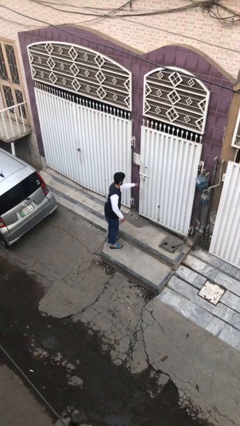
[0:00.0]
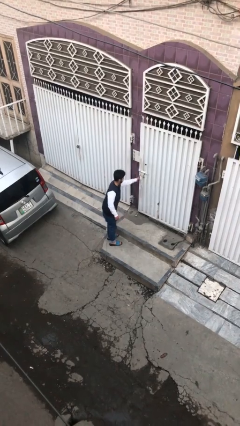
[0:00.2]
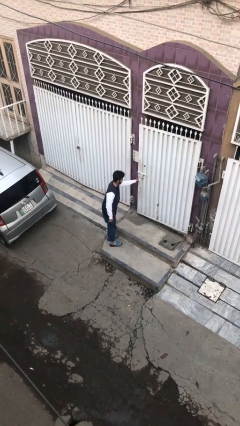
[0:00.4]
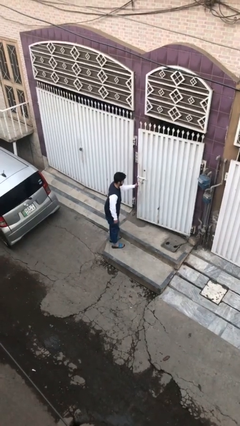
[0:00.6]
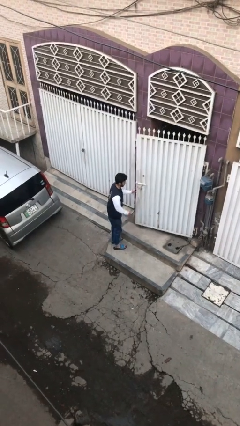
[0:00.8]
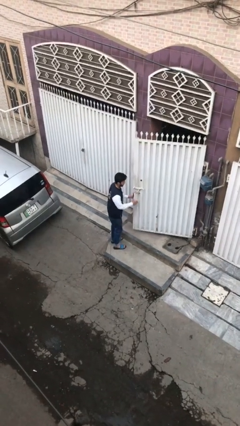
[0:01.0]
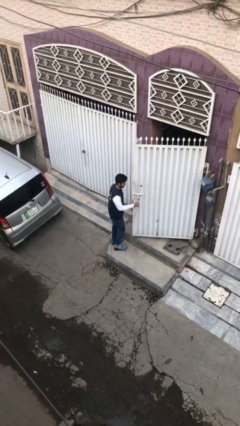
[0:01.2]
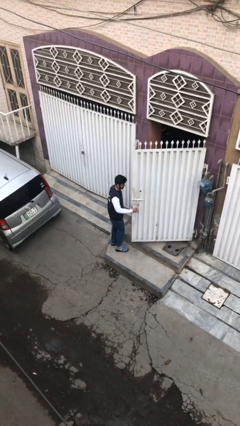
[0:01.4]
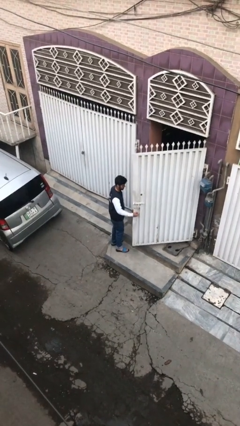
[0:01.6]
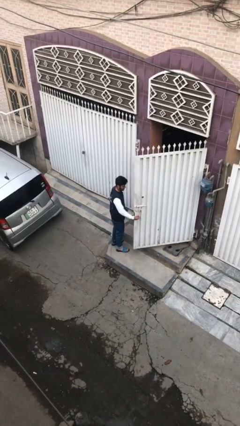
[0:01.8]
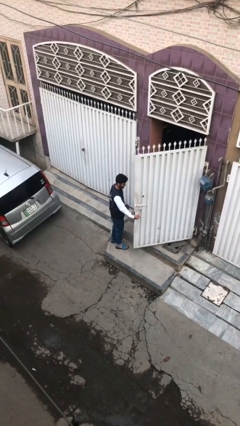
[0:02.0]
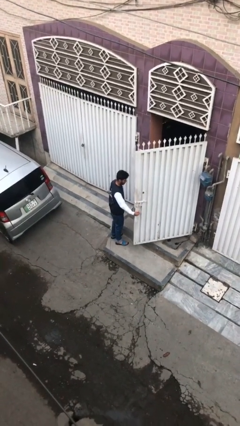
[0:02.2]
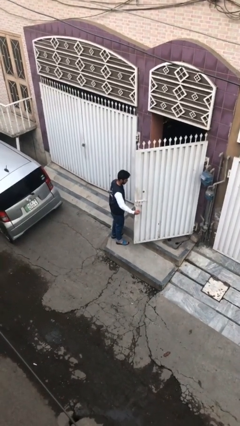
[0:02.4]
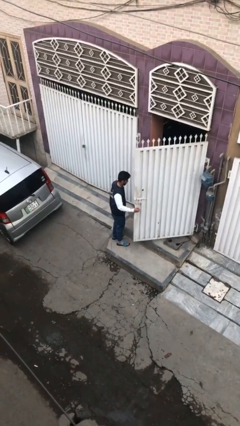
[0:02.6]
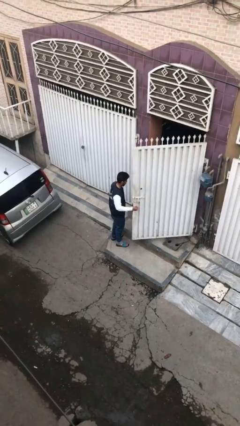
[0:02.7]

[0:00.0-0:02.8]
person opens facility door

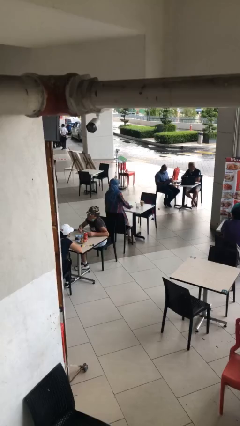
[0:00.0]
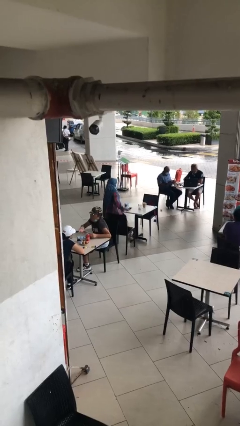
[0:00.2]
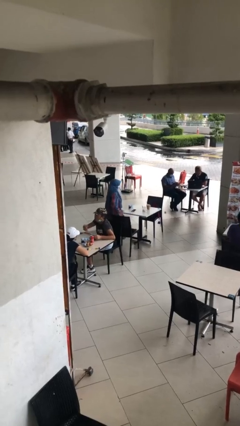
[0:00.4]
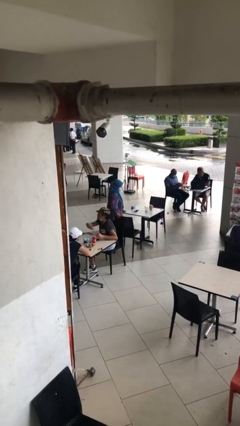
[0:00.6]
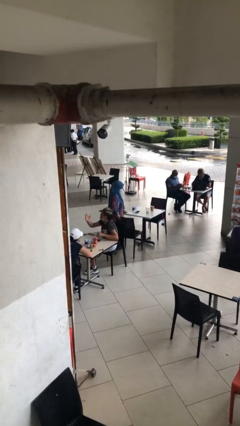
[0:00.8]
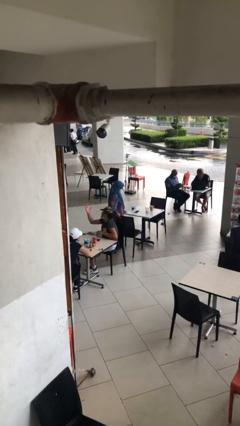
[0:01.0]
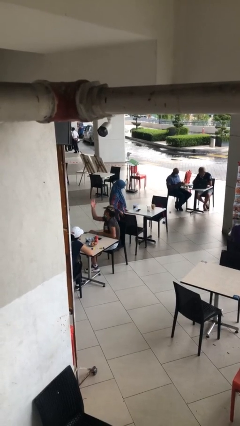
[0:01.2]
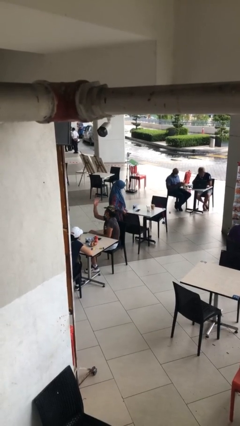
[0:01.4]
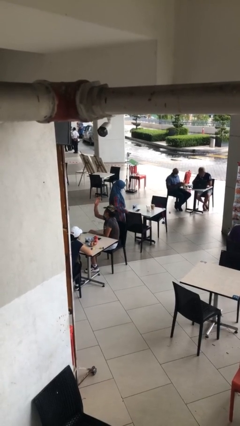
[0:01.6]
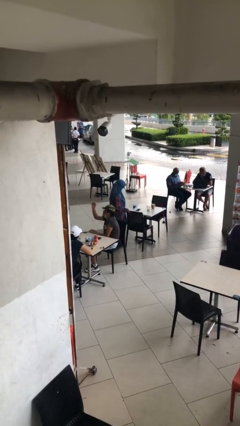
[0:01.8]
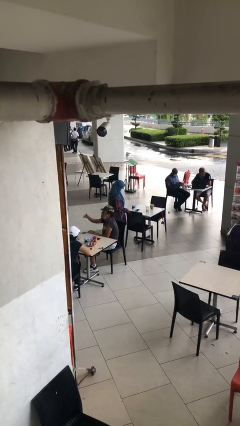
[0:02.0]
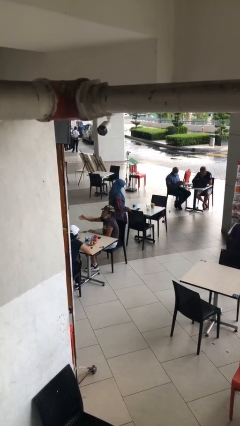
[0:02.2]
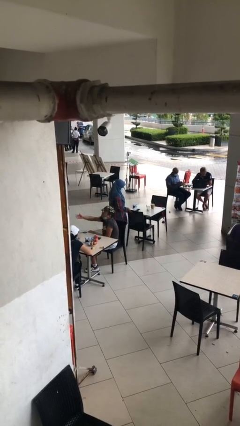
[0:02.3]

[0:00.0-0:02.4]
person stands up

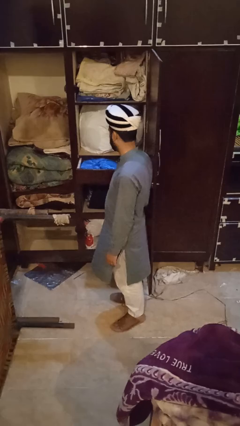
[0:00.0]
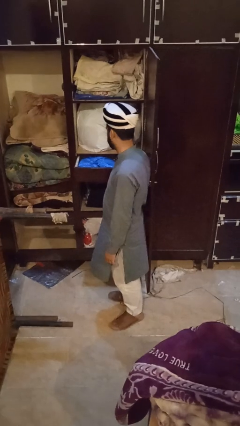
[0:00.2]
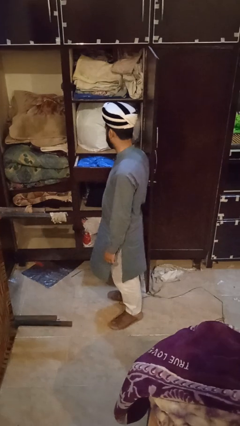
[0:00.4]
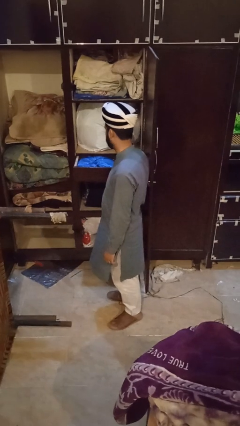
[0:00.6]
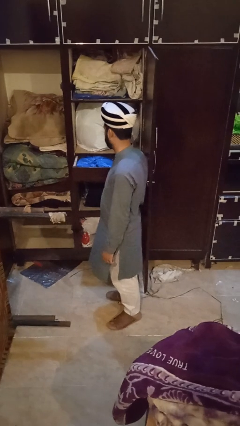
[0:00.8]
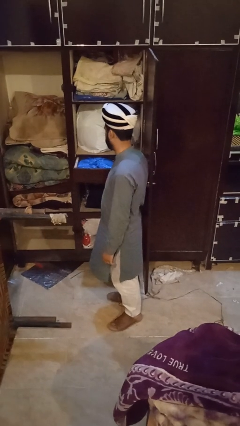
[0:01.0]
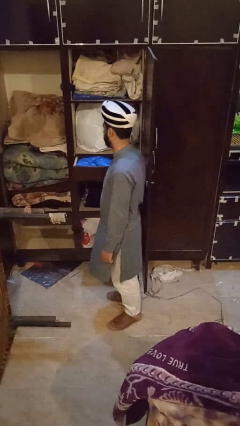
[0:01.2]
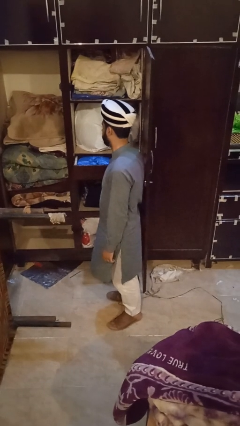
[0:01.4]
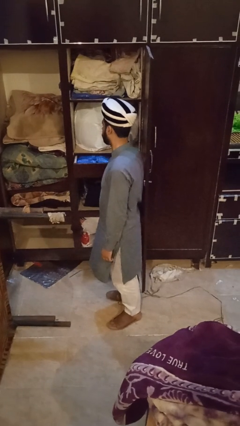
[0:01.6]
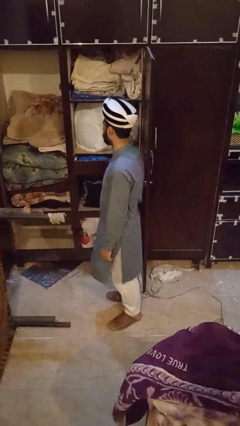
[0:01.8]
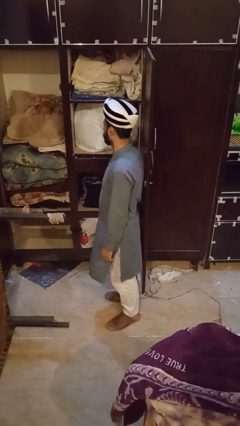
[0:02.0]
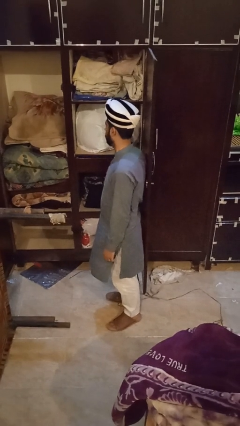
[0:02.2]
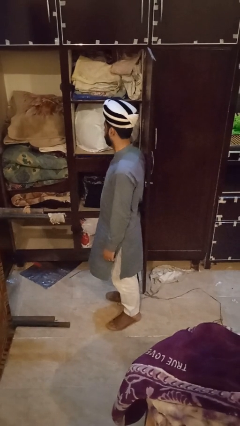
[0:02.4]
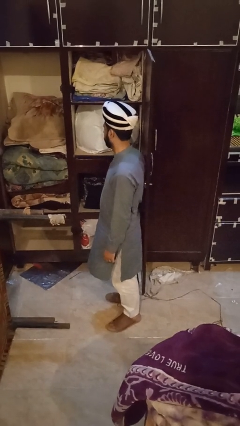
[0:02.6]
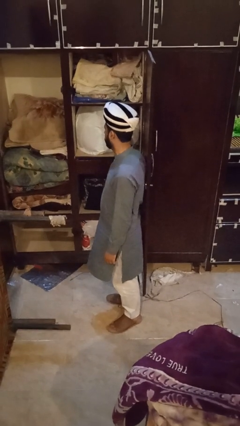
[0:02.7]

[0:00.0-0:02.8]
person closes dresser drawer

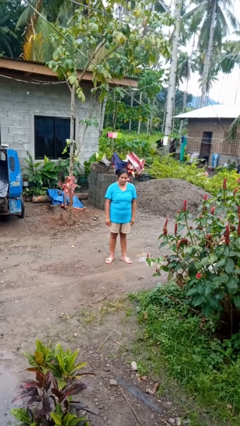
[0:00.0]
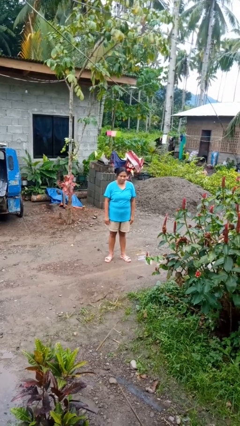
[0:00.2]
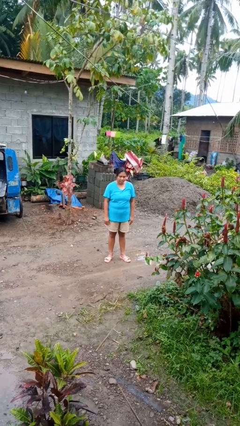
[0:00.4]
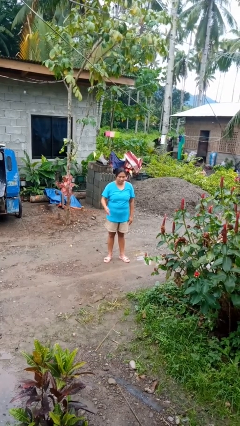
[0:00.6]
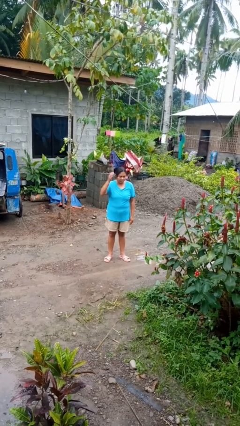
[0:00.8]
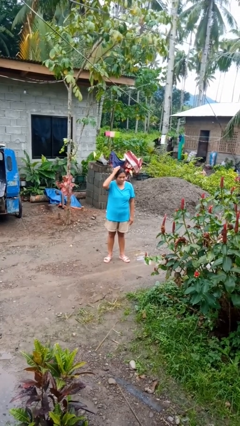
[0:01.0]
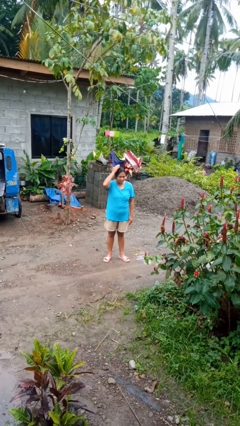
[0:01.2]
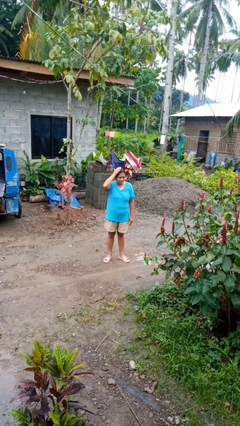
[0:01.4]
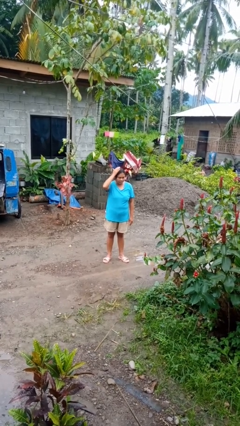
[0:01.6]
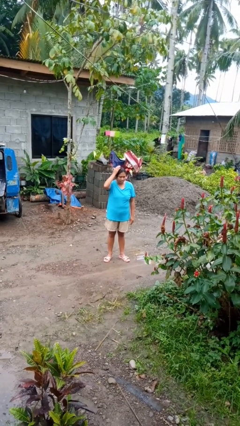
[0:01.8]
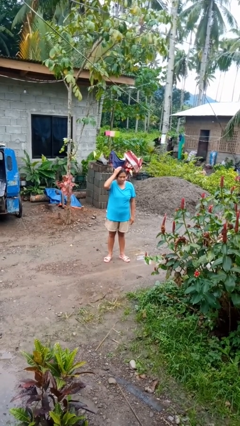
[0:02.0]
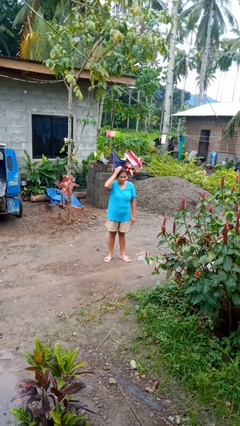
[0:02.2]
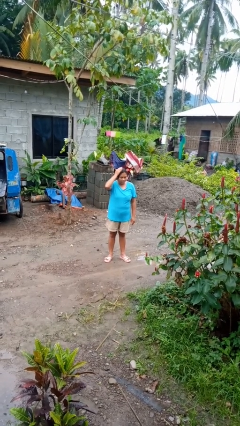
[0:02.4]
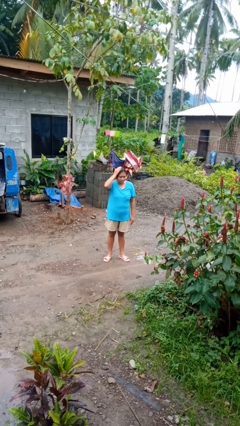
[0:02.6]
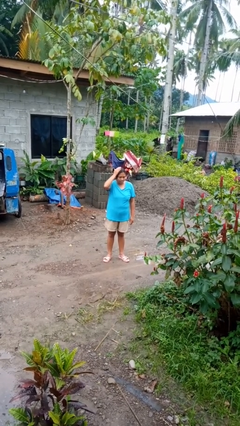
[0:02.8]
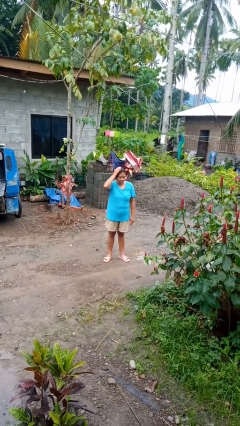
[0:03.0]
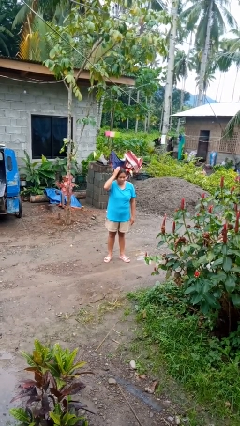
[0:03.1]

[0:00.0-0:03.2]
person pats head

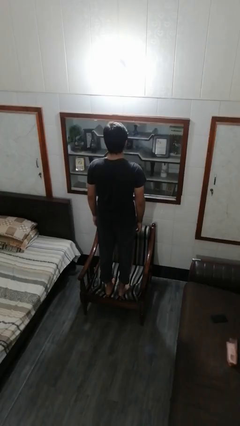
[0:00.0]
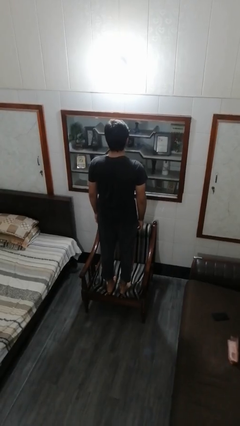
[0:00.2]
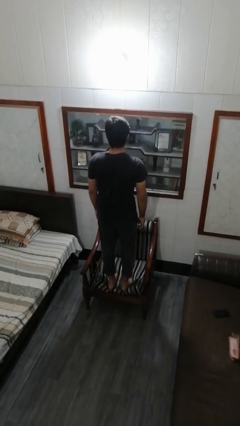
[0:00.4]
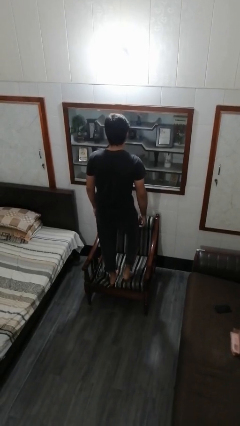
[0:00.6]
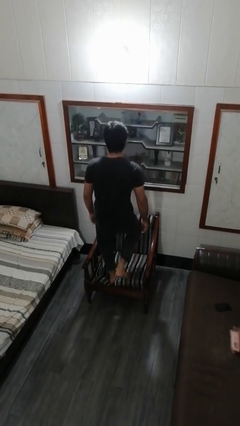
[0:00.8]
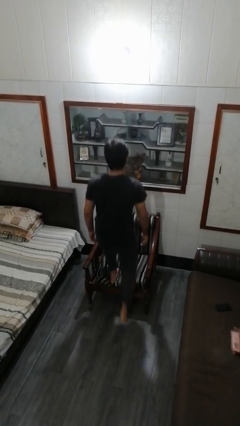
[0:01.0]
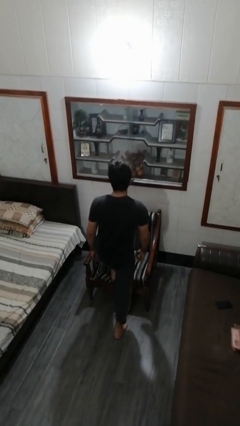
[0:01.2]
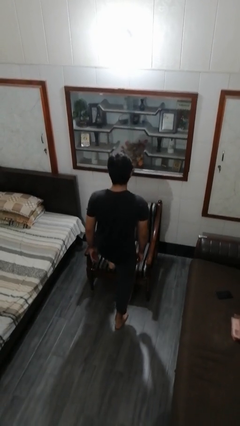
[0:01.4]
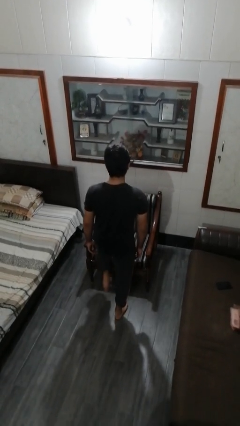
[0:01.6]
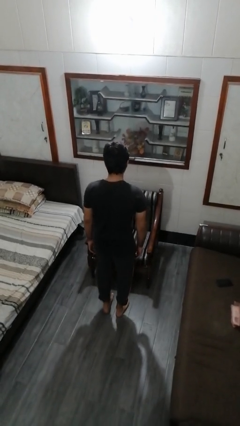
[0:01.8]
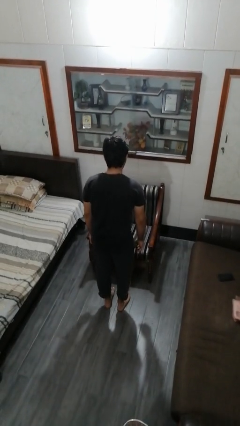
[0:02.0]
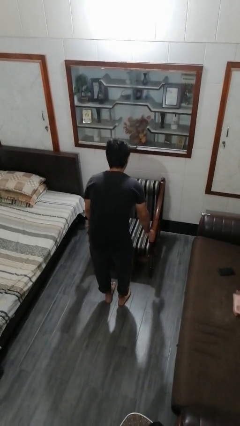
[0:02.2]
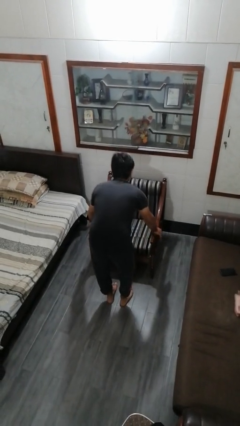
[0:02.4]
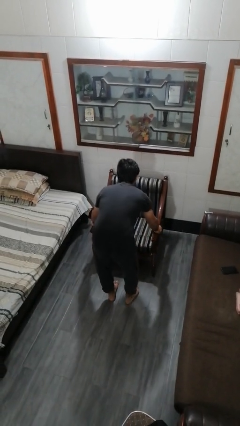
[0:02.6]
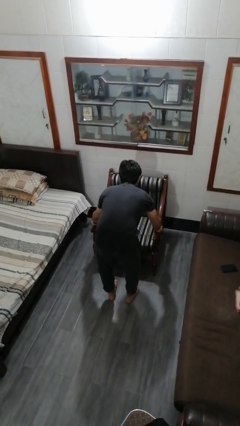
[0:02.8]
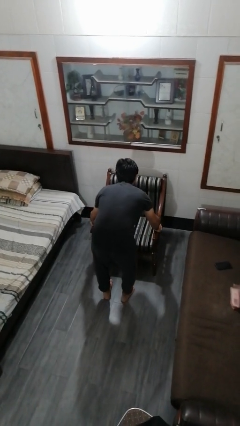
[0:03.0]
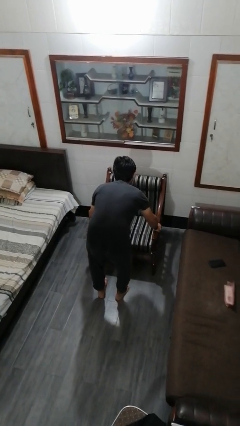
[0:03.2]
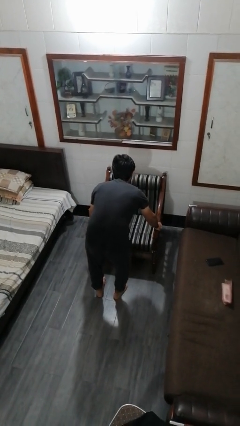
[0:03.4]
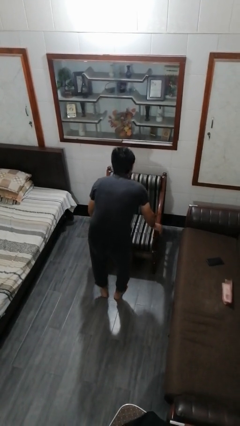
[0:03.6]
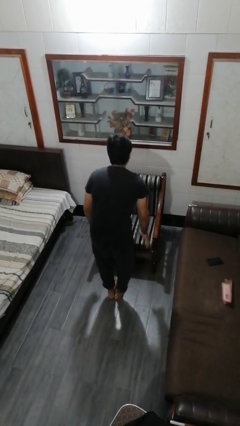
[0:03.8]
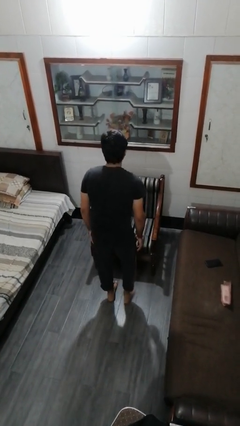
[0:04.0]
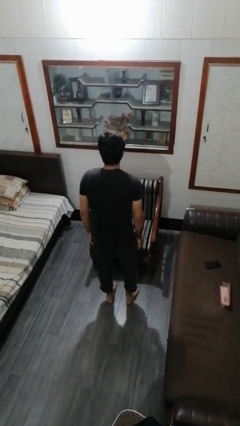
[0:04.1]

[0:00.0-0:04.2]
person climbs off chair

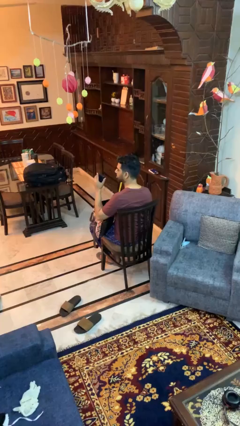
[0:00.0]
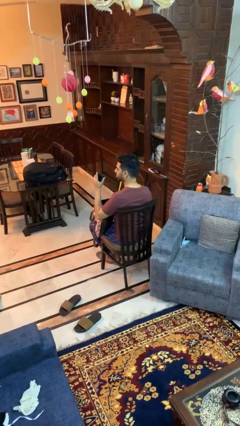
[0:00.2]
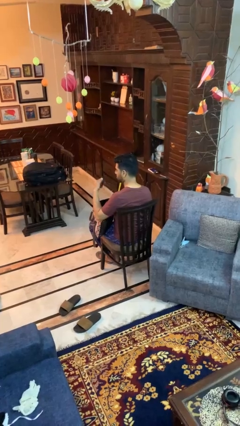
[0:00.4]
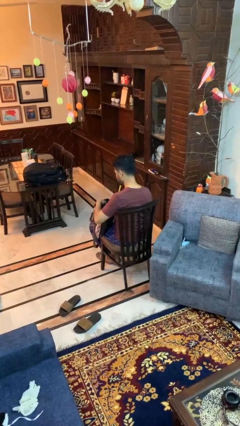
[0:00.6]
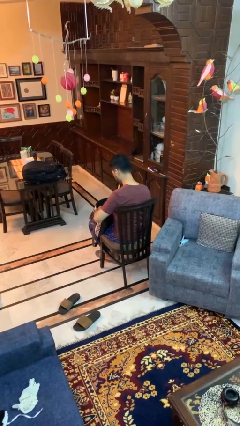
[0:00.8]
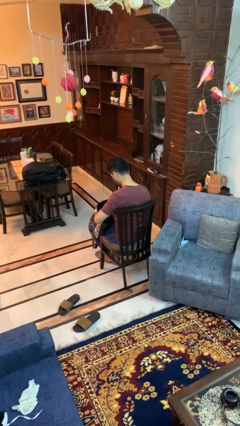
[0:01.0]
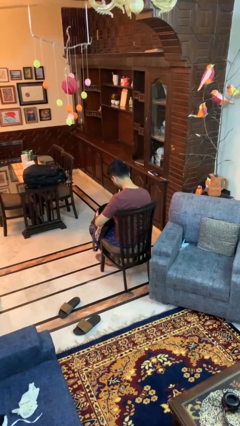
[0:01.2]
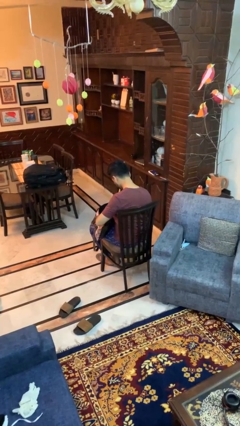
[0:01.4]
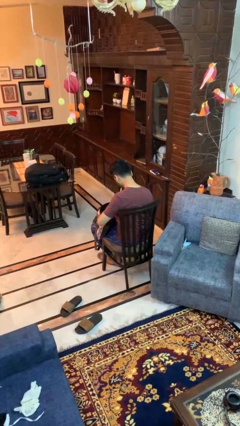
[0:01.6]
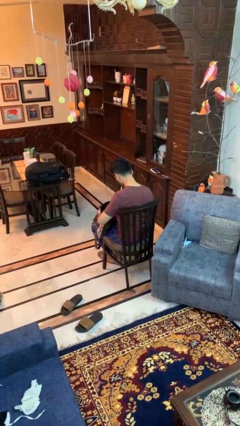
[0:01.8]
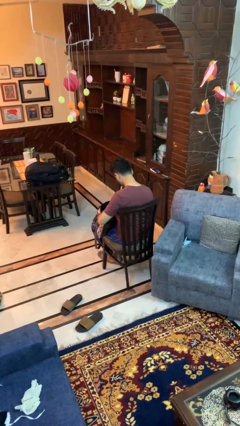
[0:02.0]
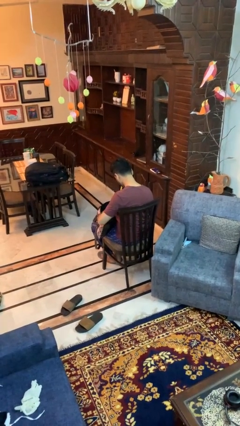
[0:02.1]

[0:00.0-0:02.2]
person puts object into purse
